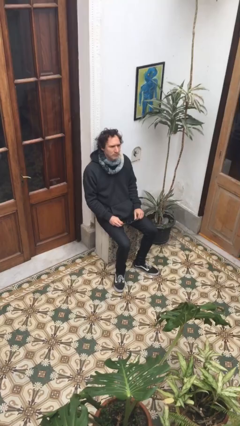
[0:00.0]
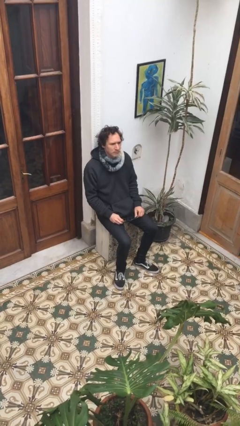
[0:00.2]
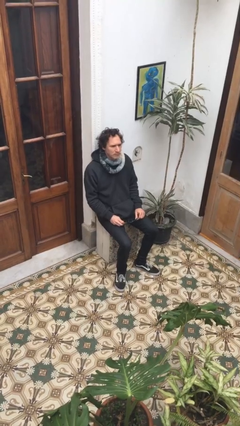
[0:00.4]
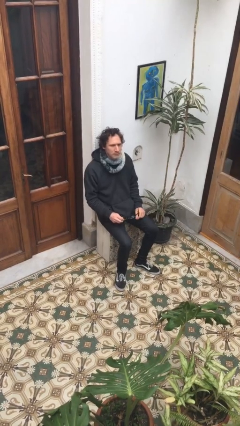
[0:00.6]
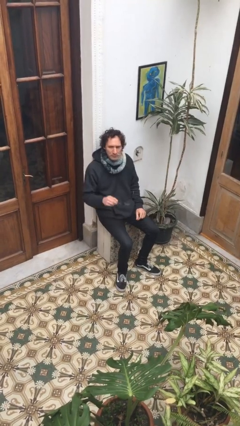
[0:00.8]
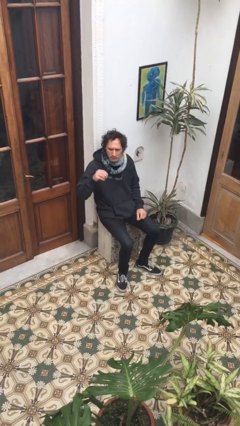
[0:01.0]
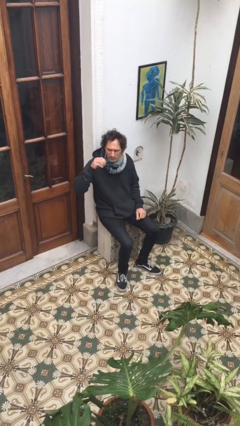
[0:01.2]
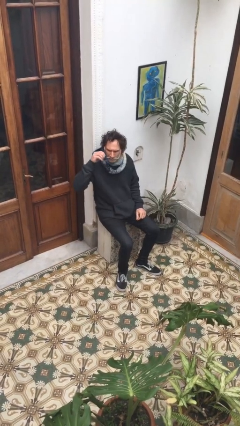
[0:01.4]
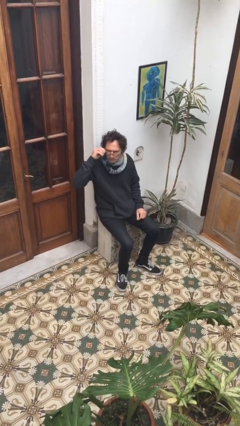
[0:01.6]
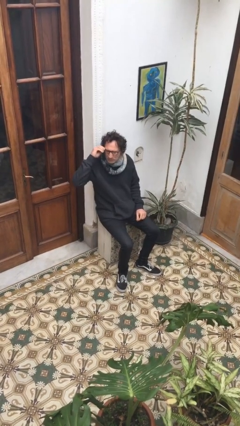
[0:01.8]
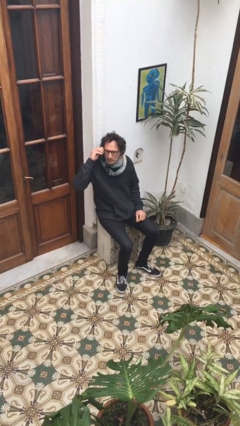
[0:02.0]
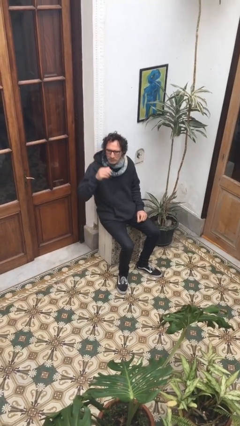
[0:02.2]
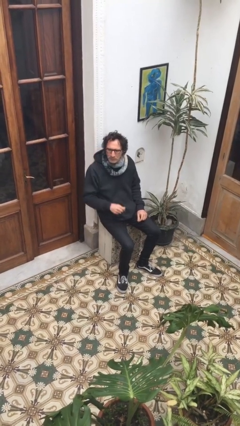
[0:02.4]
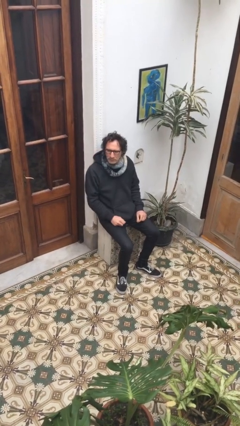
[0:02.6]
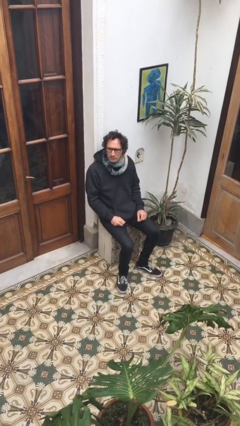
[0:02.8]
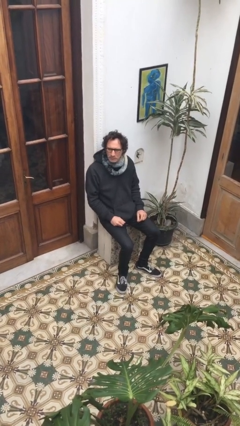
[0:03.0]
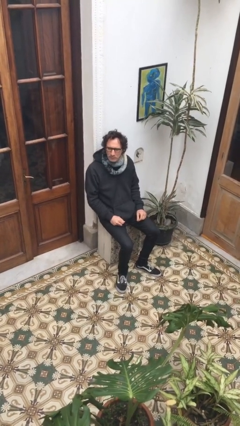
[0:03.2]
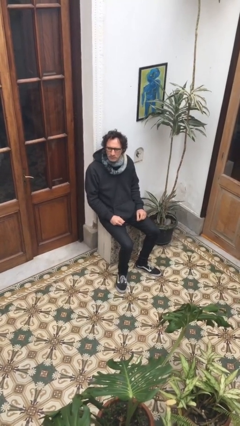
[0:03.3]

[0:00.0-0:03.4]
person puts on glasses

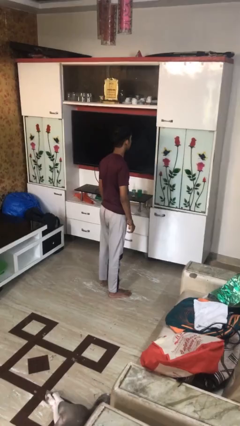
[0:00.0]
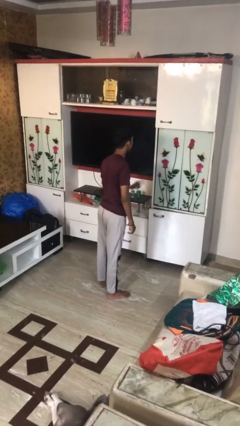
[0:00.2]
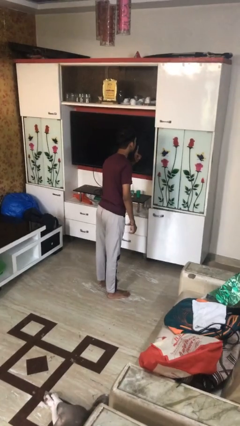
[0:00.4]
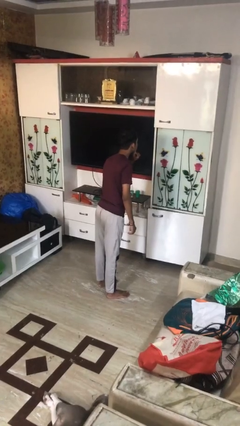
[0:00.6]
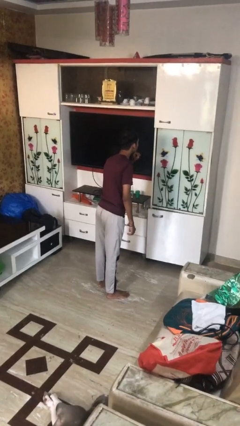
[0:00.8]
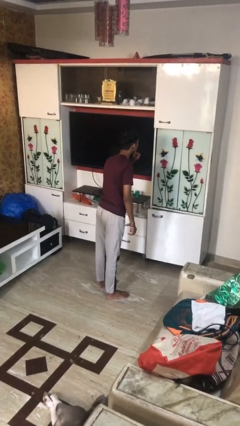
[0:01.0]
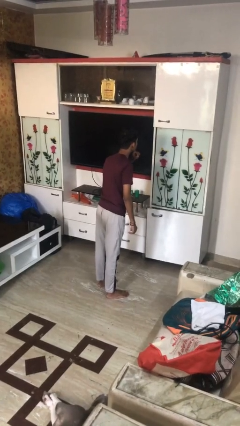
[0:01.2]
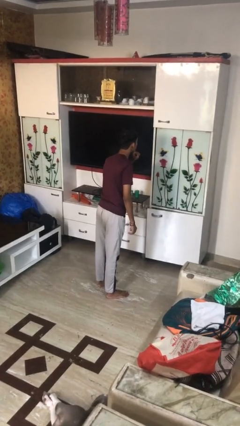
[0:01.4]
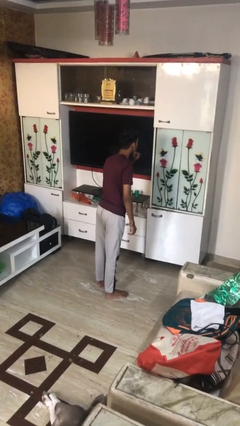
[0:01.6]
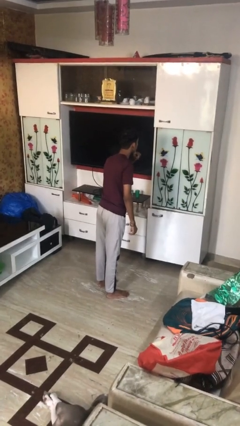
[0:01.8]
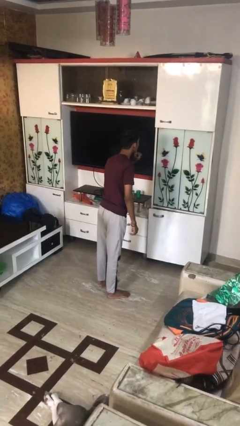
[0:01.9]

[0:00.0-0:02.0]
person gestures be quiet

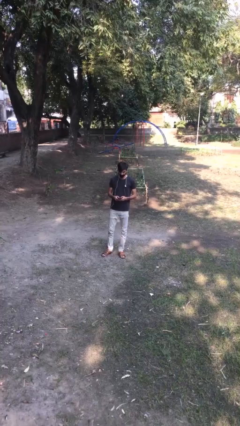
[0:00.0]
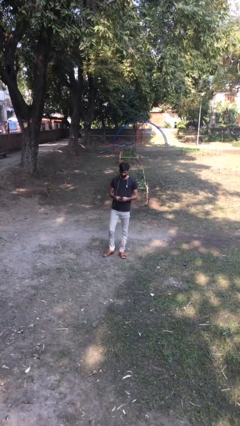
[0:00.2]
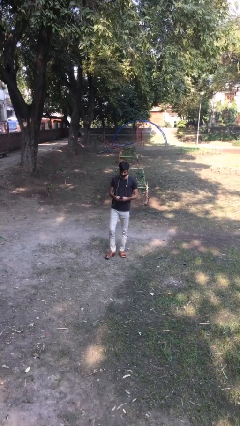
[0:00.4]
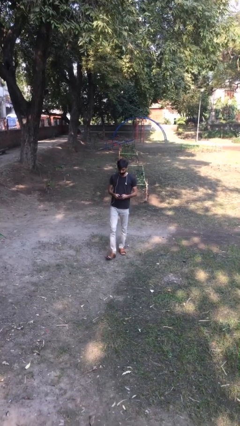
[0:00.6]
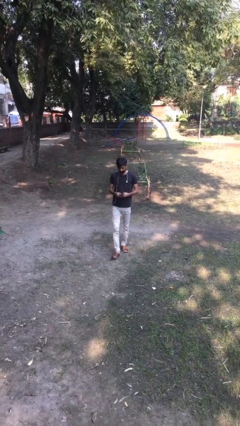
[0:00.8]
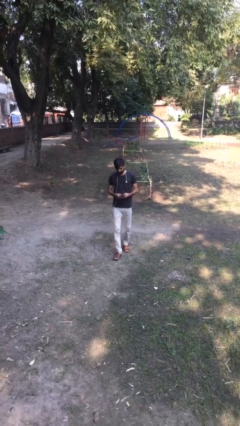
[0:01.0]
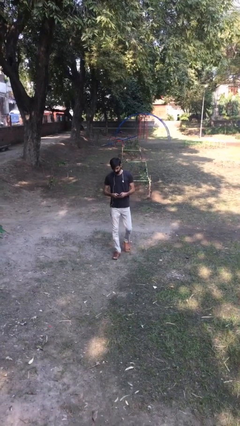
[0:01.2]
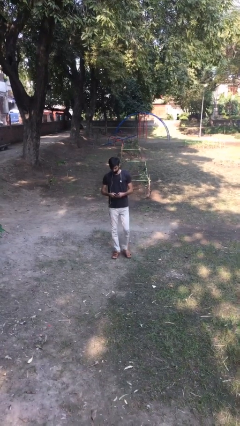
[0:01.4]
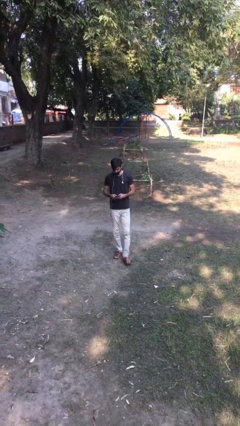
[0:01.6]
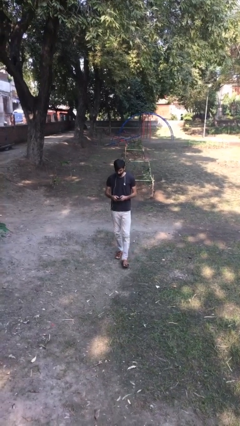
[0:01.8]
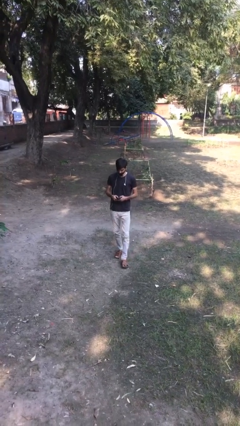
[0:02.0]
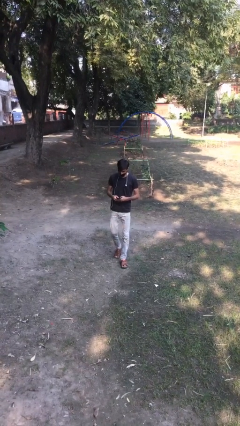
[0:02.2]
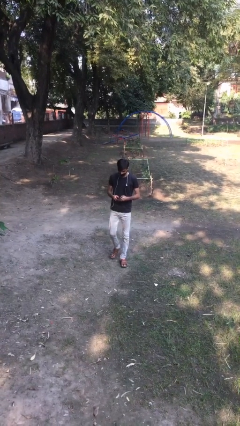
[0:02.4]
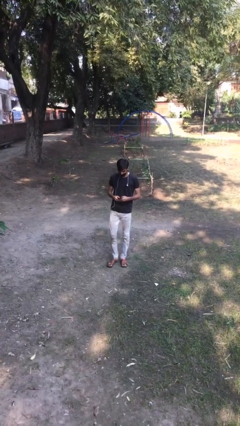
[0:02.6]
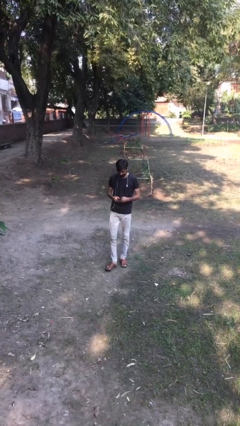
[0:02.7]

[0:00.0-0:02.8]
person texts on phone

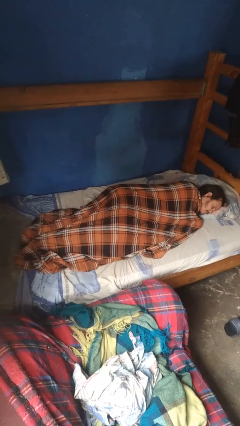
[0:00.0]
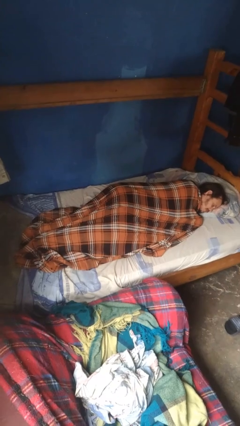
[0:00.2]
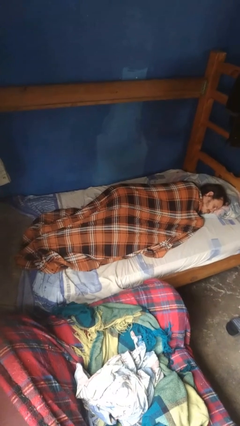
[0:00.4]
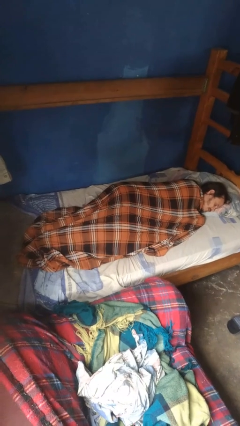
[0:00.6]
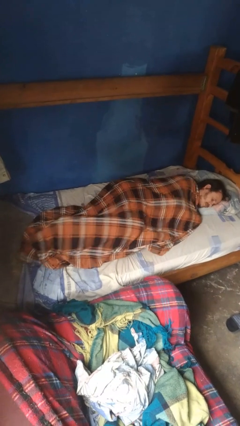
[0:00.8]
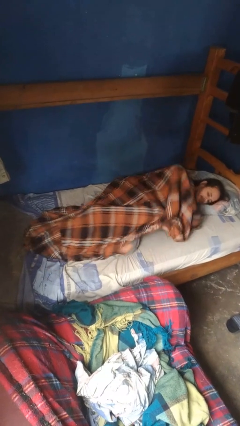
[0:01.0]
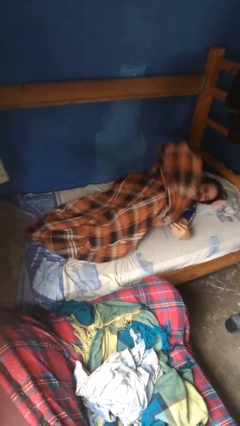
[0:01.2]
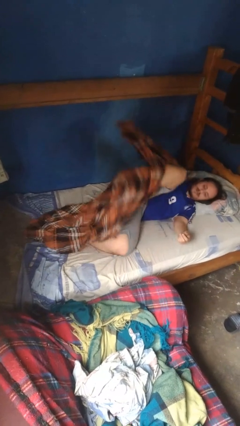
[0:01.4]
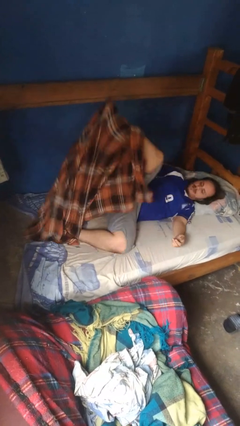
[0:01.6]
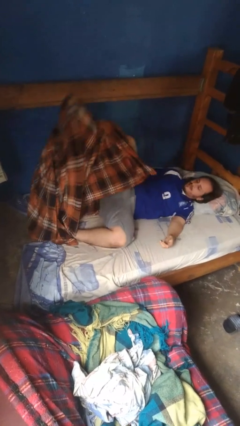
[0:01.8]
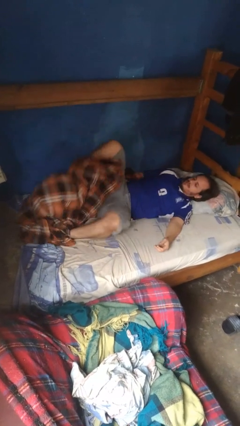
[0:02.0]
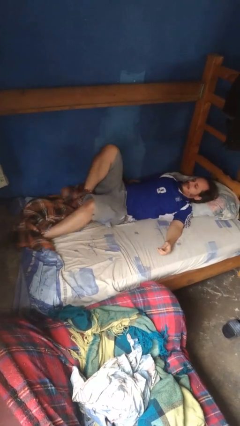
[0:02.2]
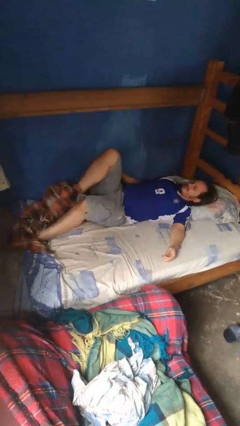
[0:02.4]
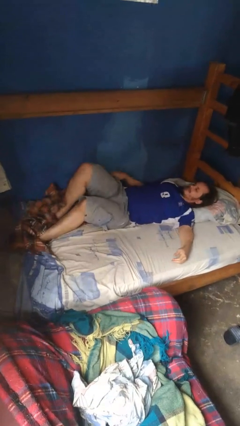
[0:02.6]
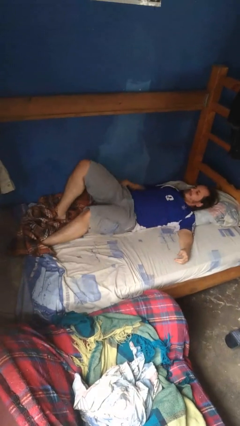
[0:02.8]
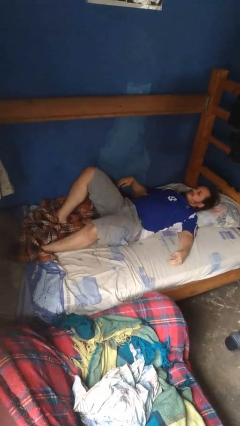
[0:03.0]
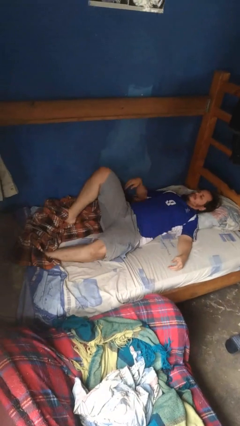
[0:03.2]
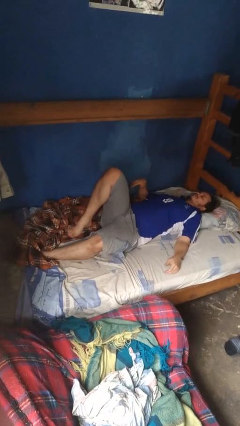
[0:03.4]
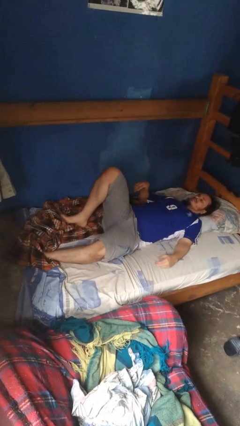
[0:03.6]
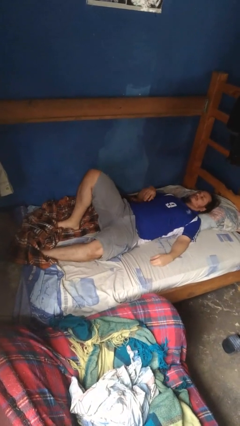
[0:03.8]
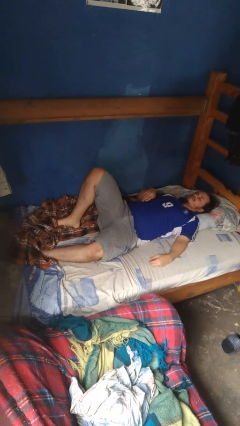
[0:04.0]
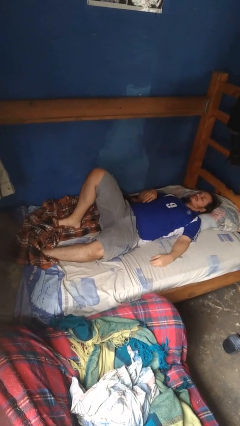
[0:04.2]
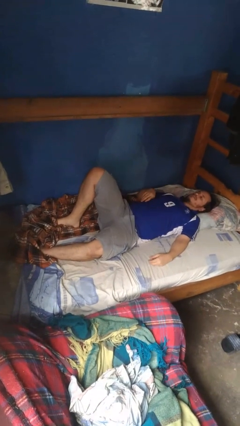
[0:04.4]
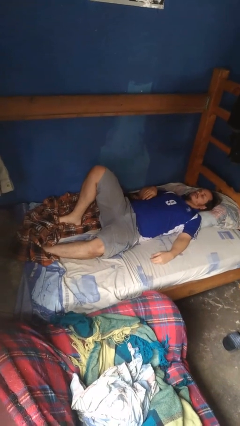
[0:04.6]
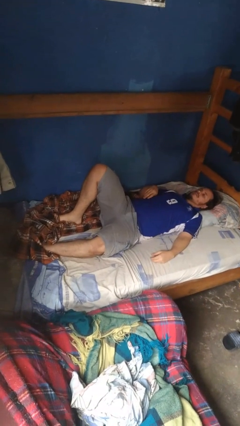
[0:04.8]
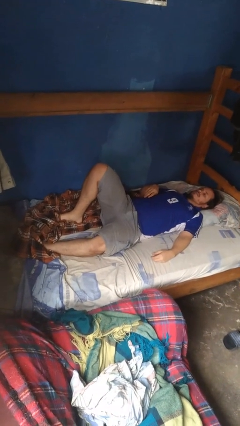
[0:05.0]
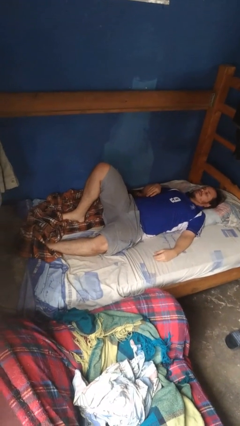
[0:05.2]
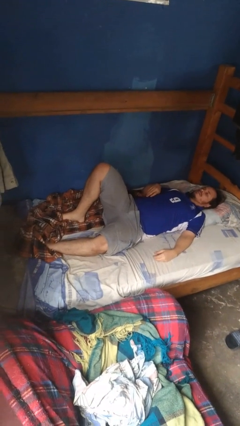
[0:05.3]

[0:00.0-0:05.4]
person uncovers with bedsheets

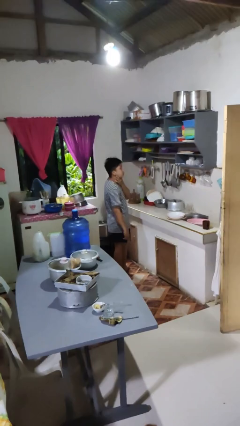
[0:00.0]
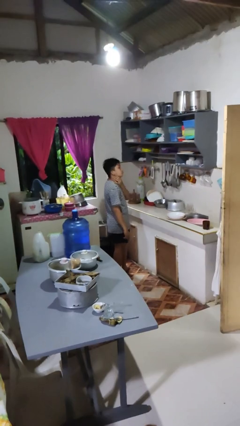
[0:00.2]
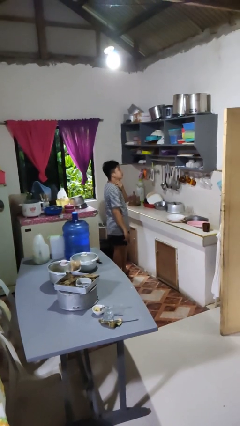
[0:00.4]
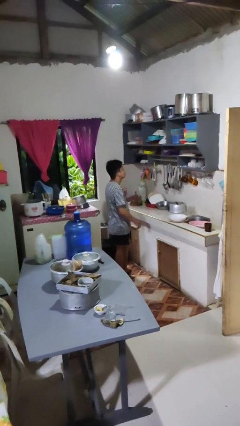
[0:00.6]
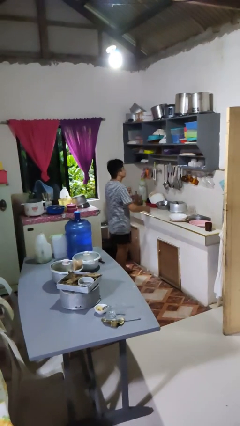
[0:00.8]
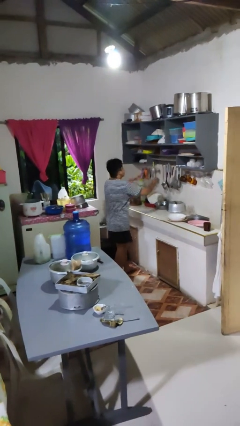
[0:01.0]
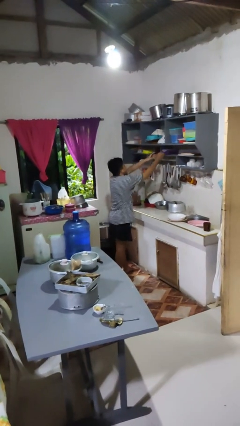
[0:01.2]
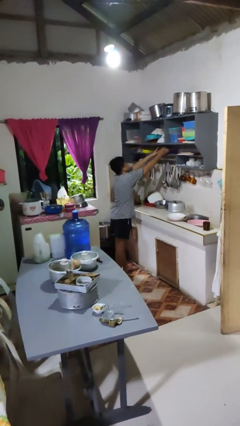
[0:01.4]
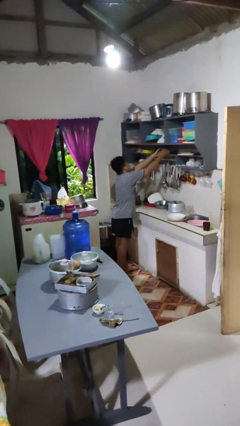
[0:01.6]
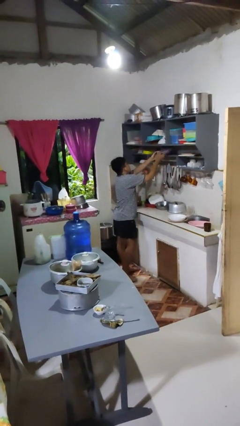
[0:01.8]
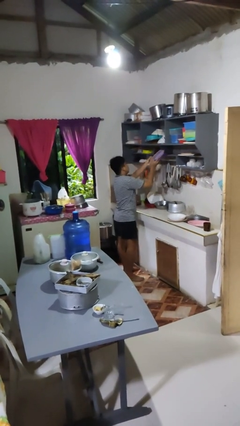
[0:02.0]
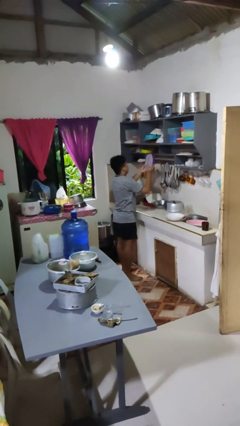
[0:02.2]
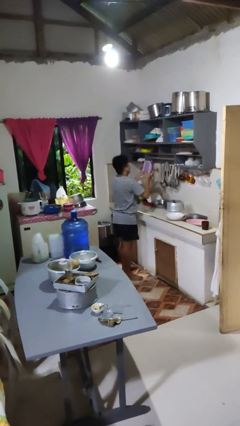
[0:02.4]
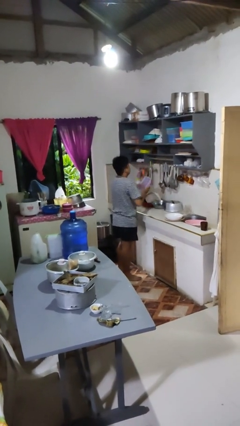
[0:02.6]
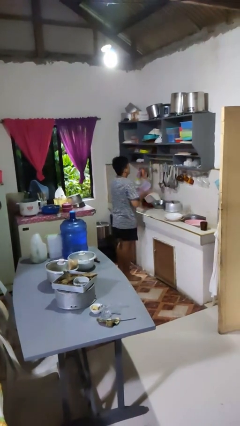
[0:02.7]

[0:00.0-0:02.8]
person picks up object from cabinet

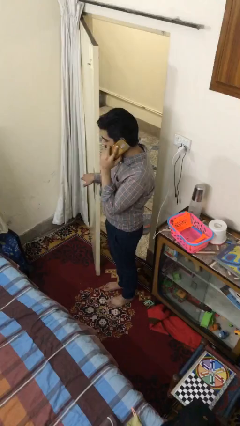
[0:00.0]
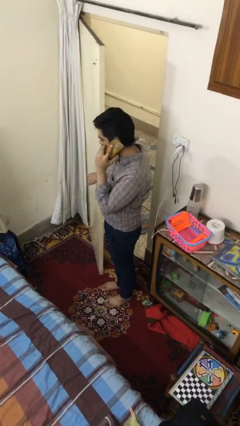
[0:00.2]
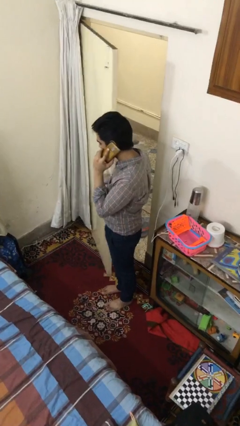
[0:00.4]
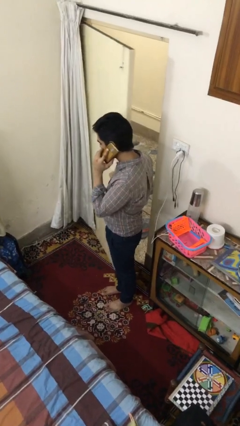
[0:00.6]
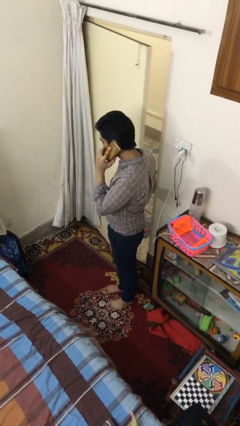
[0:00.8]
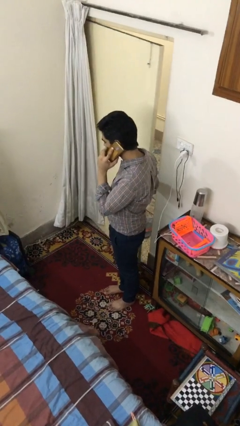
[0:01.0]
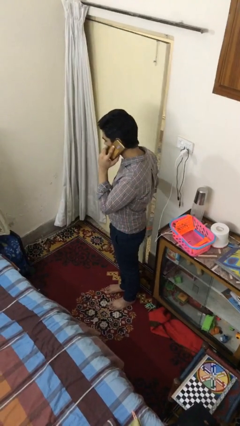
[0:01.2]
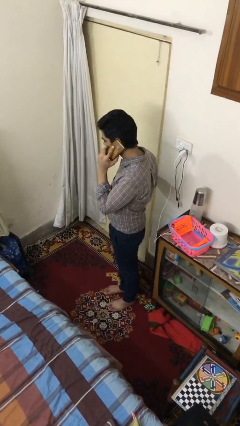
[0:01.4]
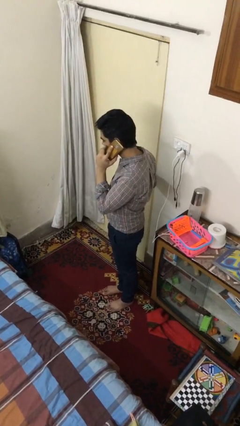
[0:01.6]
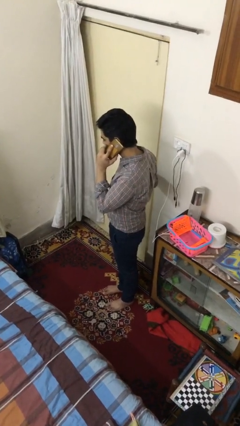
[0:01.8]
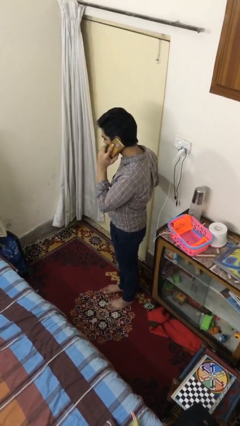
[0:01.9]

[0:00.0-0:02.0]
person closes facility door
